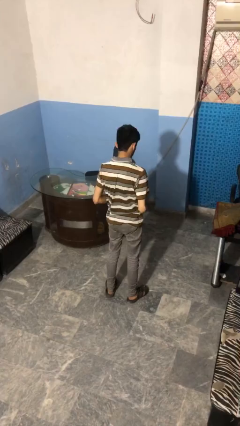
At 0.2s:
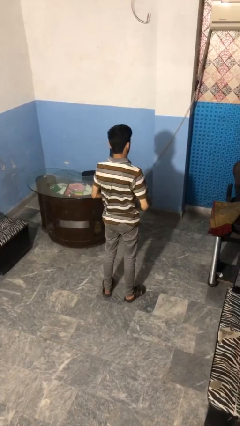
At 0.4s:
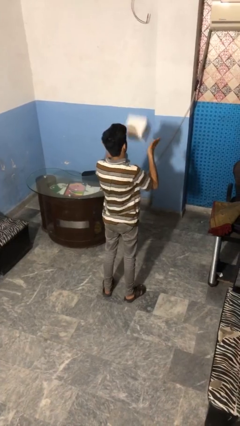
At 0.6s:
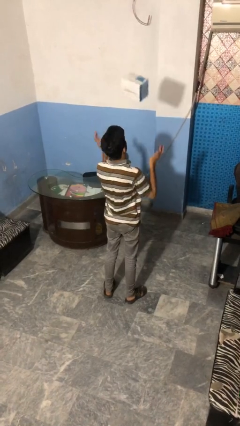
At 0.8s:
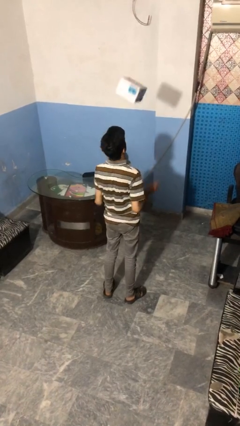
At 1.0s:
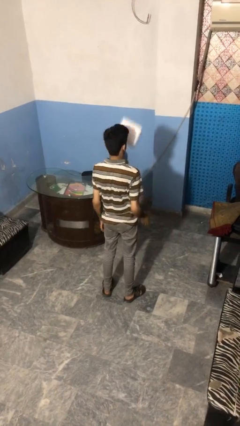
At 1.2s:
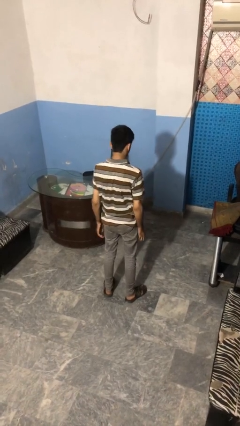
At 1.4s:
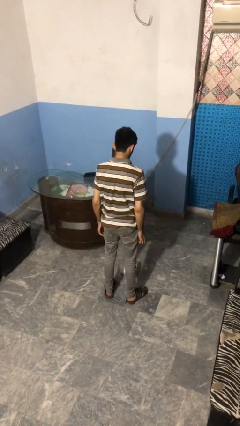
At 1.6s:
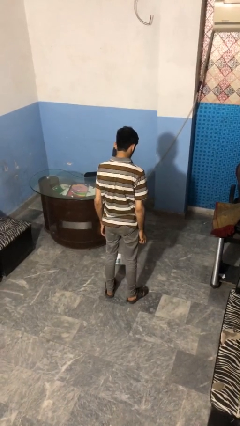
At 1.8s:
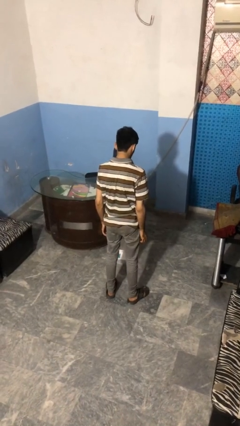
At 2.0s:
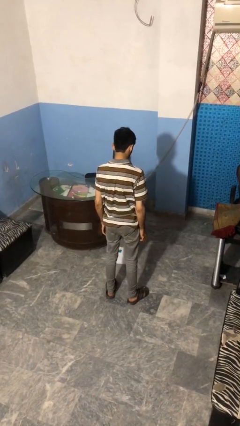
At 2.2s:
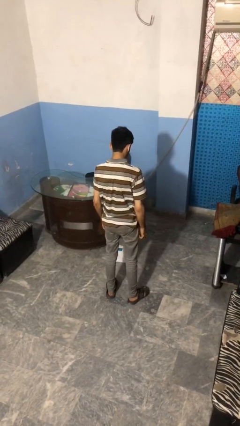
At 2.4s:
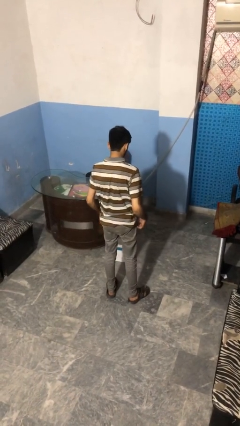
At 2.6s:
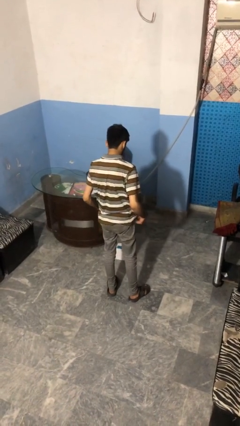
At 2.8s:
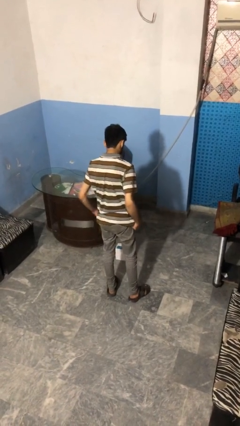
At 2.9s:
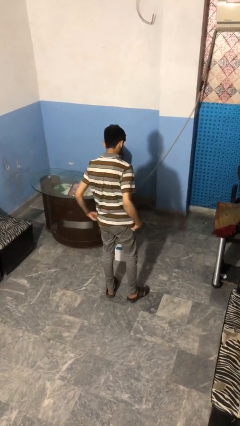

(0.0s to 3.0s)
person throws object into air

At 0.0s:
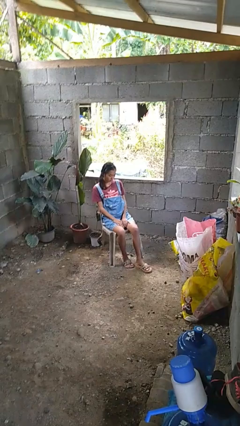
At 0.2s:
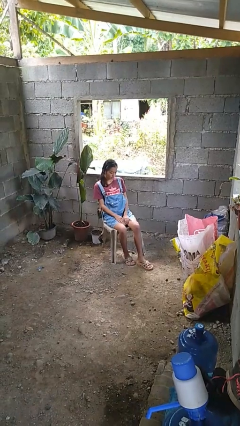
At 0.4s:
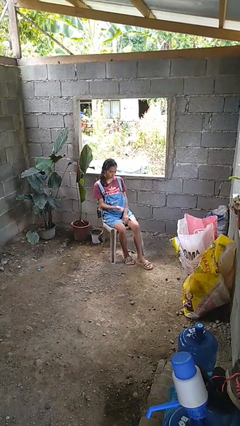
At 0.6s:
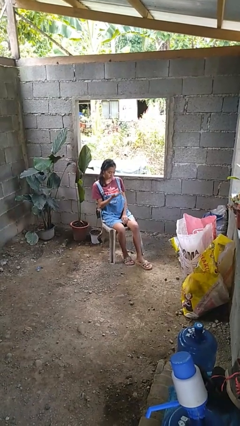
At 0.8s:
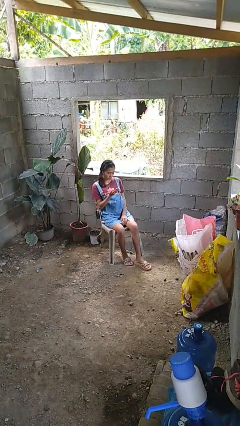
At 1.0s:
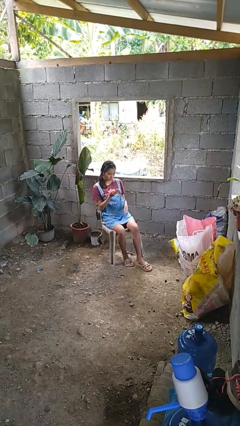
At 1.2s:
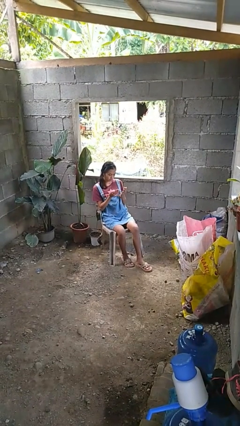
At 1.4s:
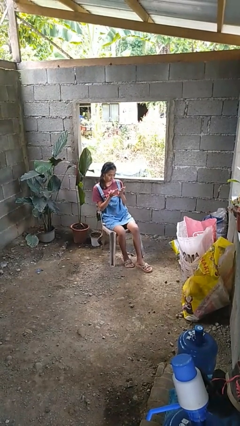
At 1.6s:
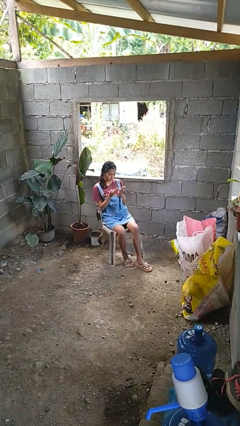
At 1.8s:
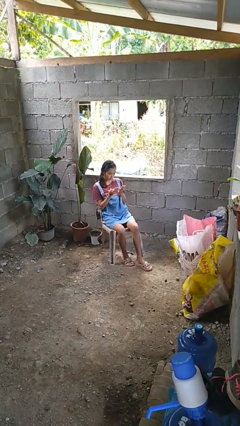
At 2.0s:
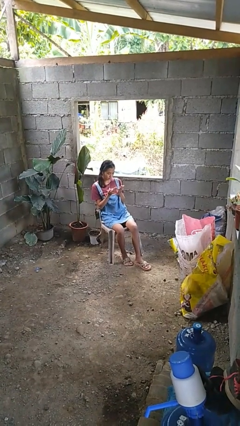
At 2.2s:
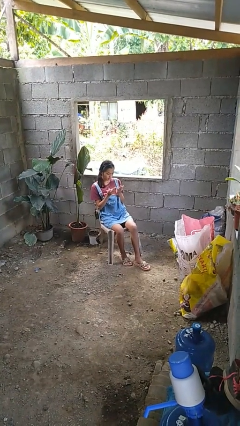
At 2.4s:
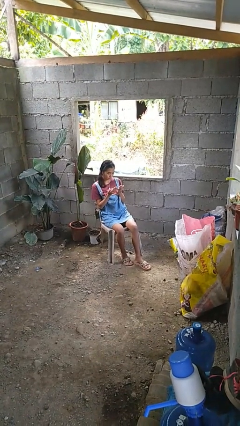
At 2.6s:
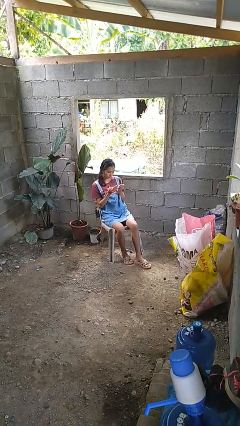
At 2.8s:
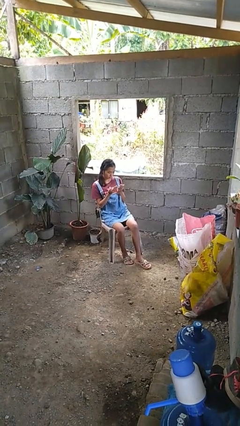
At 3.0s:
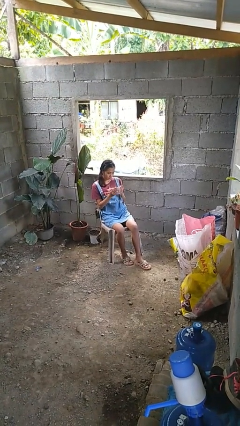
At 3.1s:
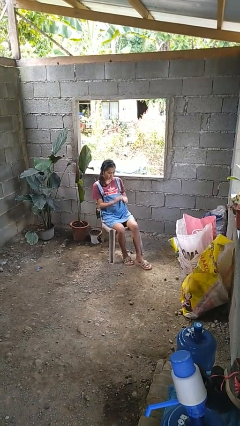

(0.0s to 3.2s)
person looks at hands in lap

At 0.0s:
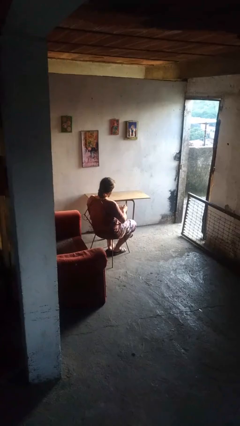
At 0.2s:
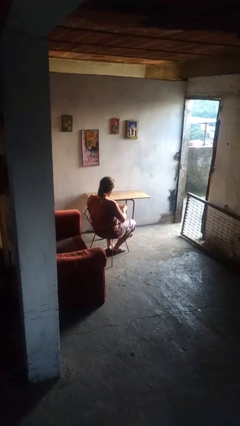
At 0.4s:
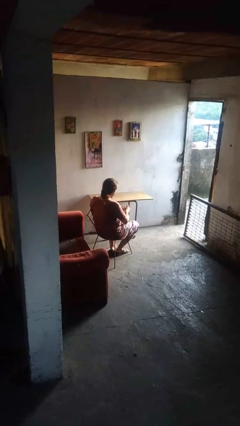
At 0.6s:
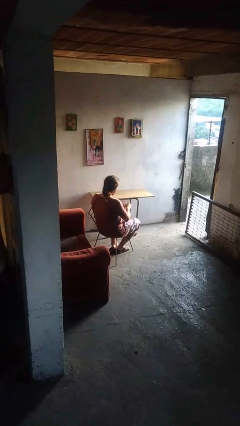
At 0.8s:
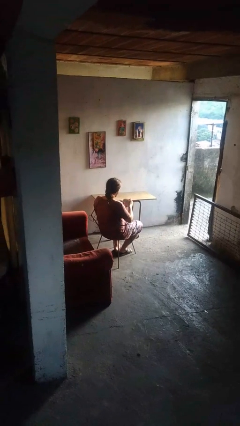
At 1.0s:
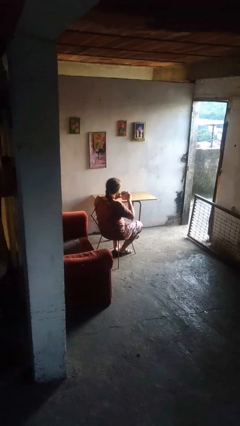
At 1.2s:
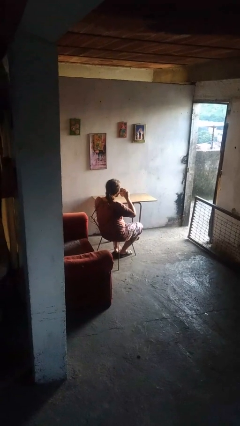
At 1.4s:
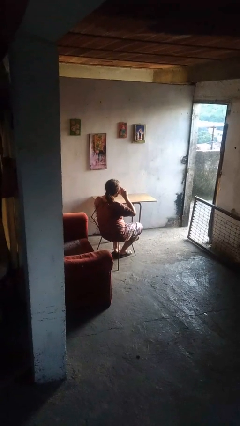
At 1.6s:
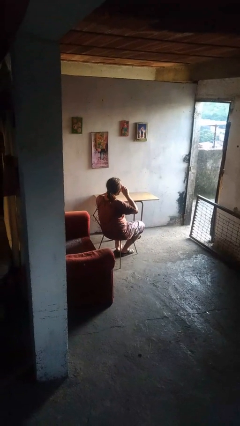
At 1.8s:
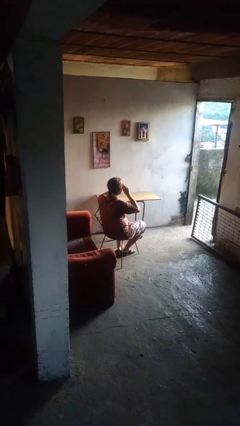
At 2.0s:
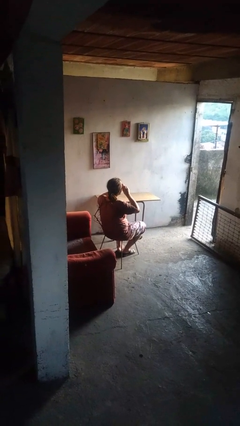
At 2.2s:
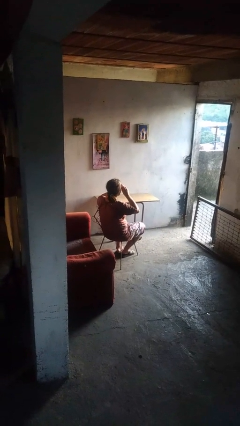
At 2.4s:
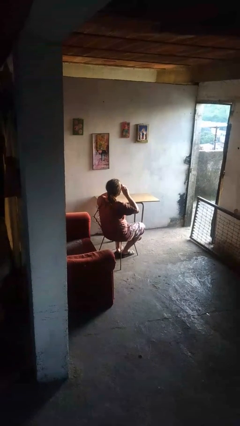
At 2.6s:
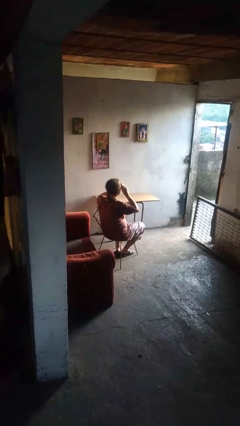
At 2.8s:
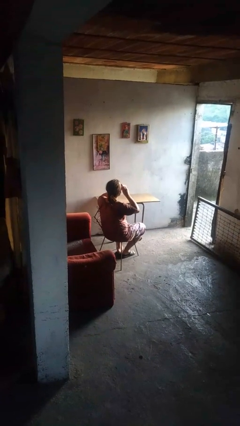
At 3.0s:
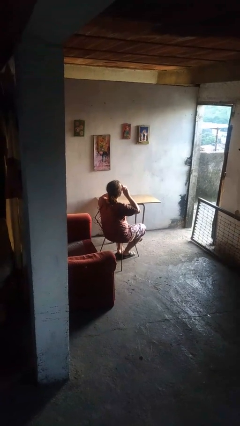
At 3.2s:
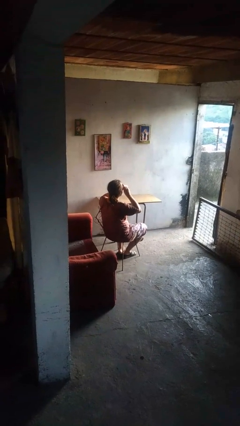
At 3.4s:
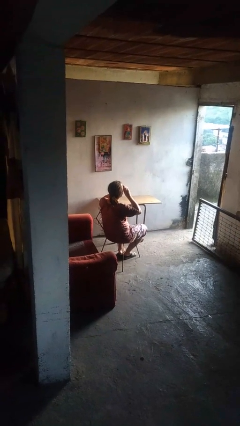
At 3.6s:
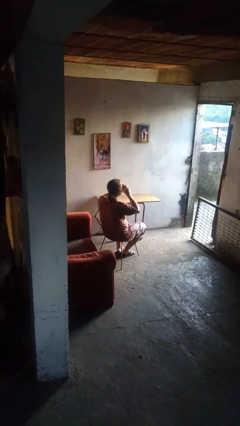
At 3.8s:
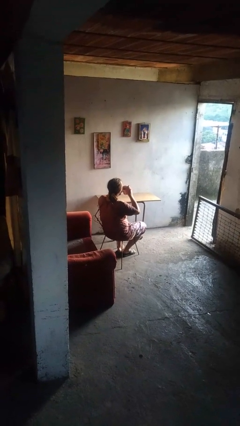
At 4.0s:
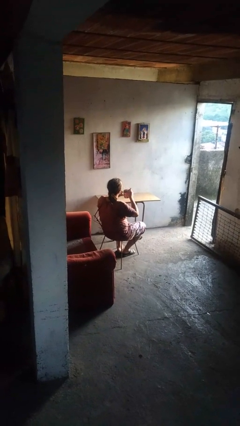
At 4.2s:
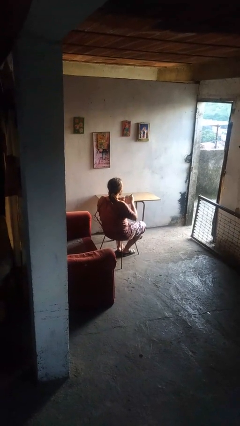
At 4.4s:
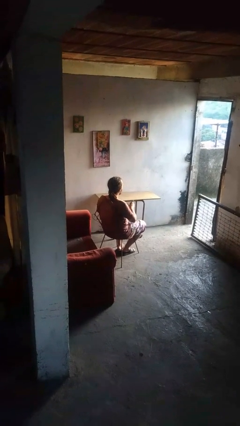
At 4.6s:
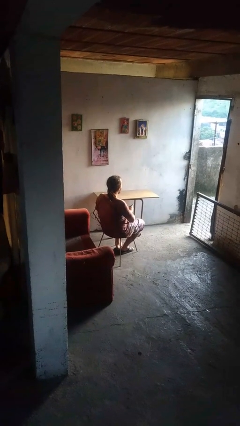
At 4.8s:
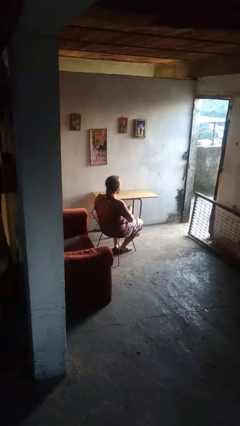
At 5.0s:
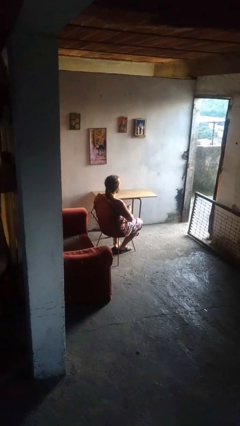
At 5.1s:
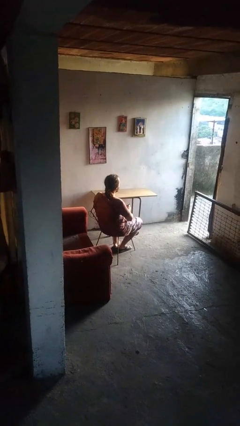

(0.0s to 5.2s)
person drinks from mug

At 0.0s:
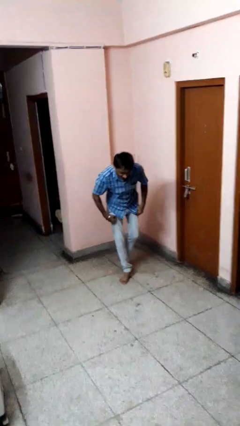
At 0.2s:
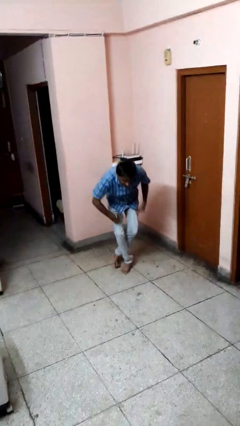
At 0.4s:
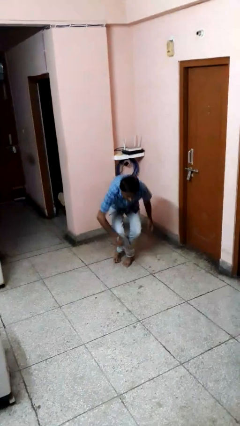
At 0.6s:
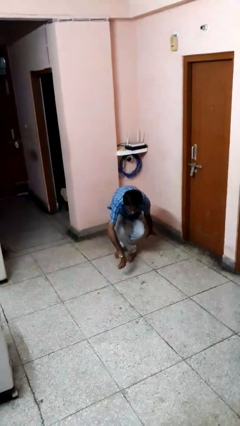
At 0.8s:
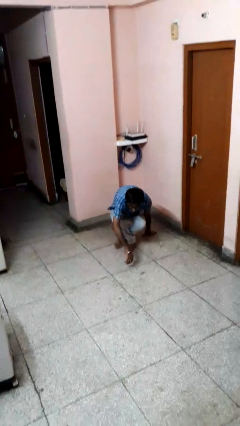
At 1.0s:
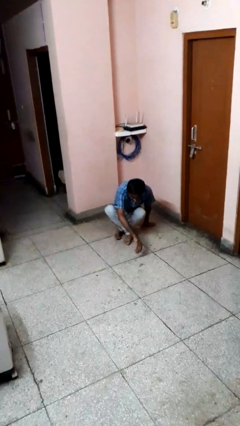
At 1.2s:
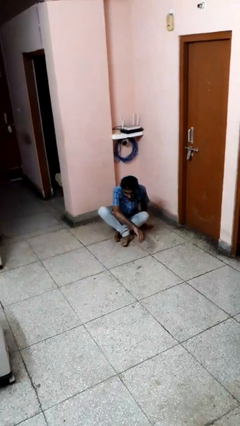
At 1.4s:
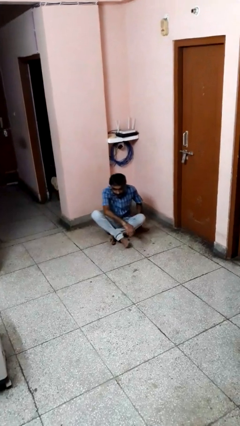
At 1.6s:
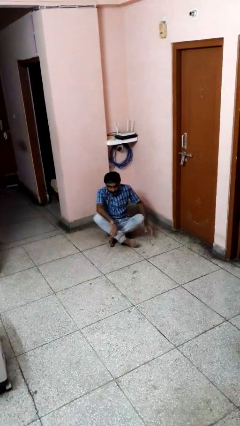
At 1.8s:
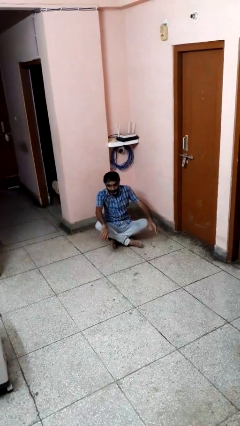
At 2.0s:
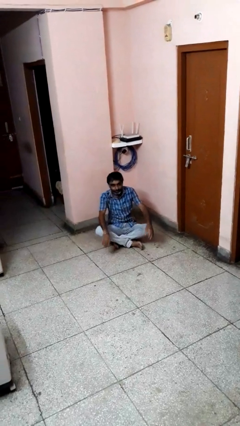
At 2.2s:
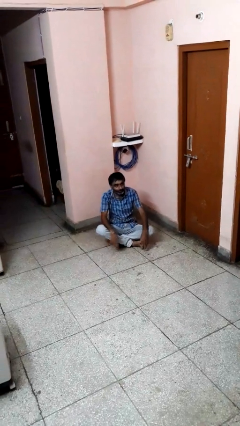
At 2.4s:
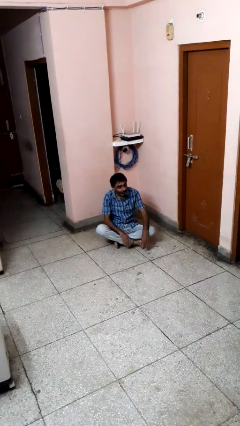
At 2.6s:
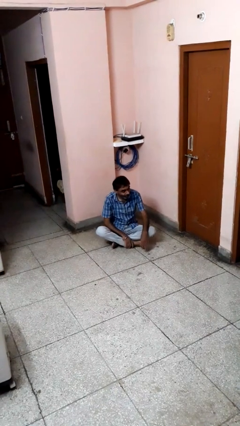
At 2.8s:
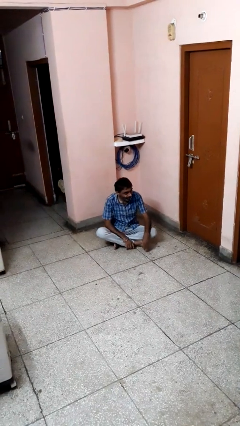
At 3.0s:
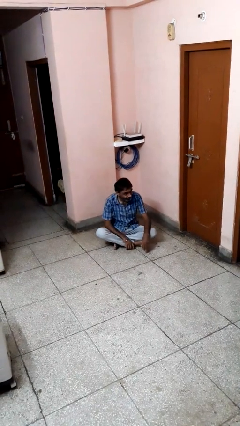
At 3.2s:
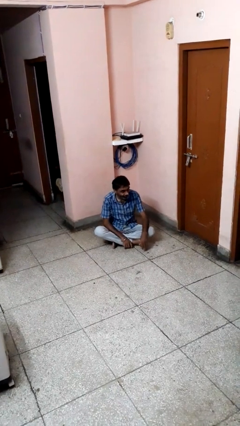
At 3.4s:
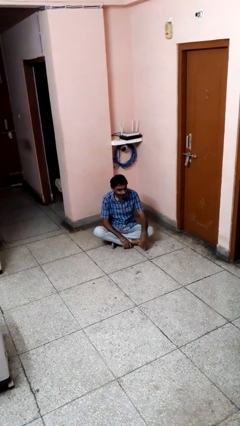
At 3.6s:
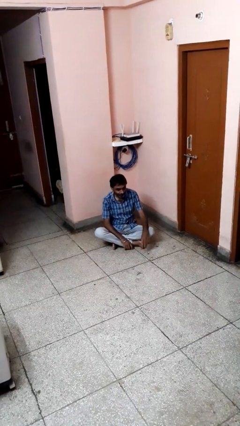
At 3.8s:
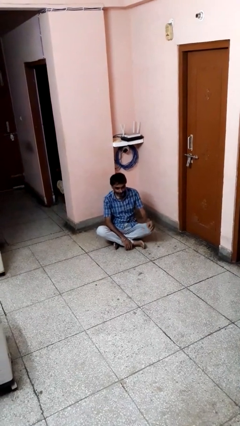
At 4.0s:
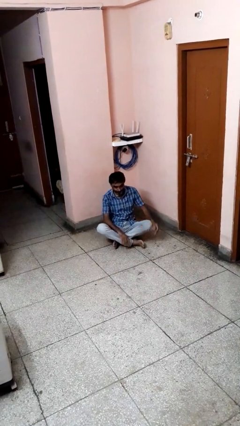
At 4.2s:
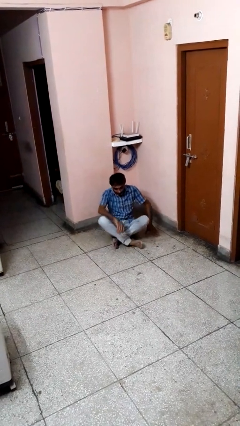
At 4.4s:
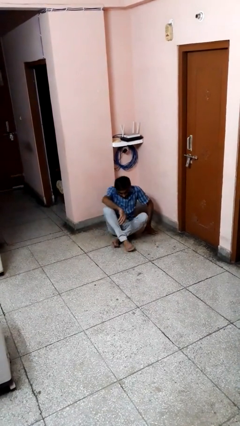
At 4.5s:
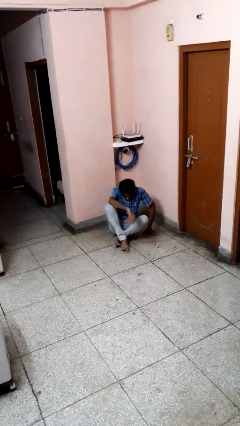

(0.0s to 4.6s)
person sits crisscross

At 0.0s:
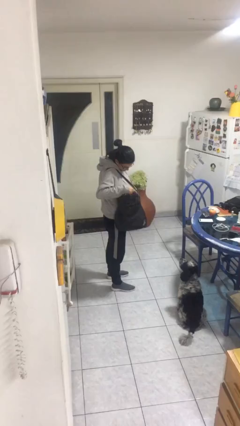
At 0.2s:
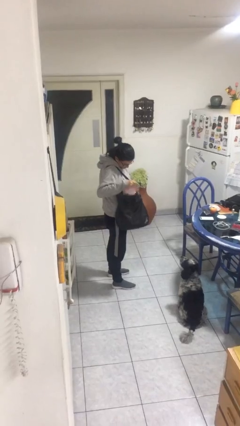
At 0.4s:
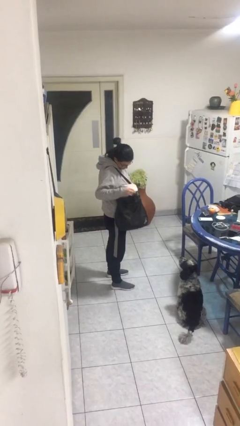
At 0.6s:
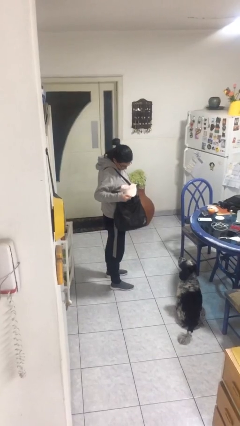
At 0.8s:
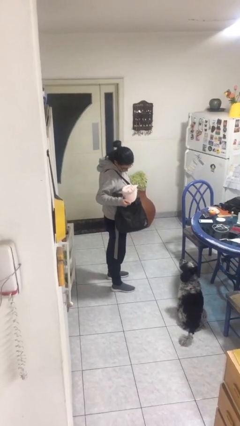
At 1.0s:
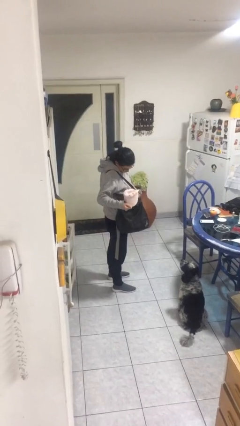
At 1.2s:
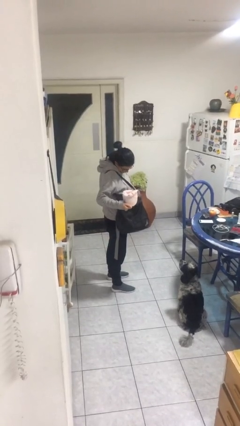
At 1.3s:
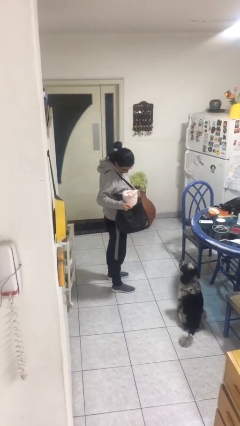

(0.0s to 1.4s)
person takes object from purse
